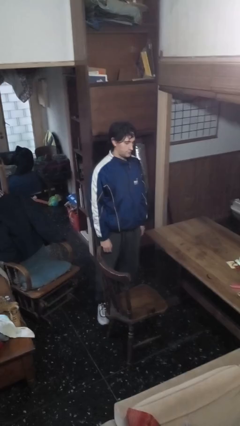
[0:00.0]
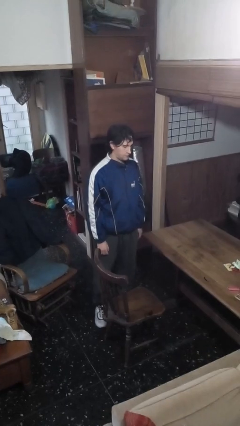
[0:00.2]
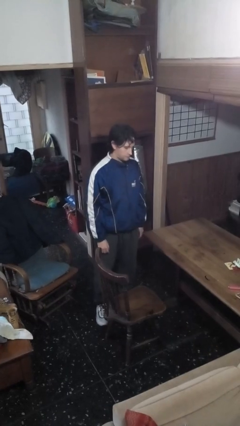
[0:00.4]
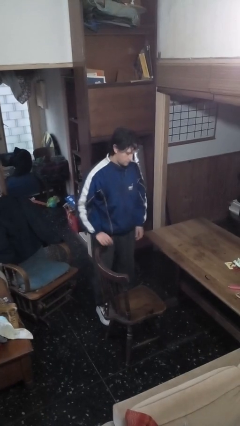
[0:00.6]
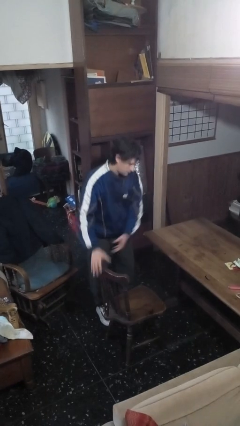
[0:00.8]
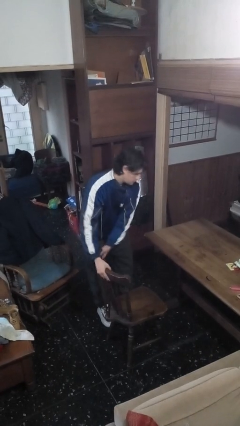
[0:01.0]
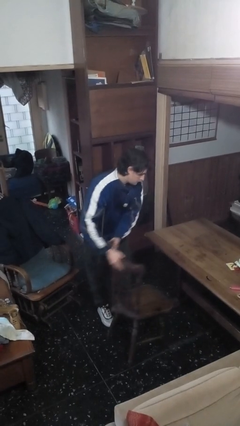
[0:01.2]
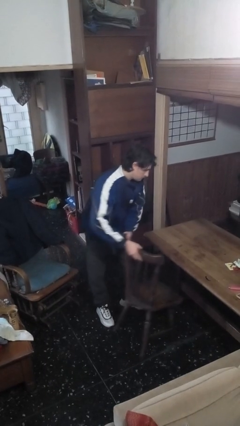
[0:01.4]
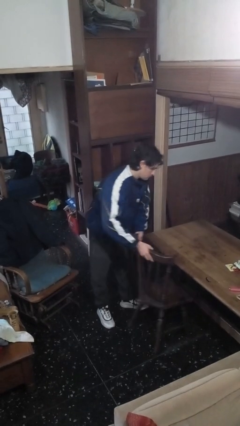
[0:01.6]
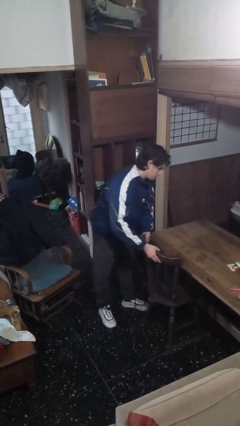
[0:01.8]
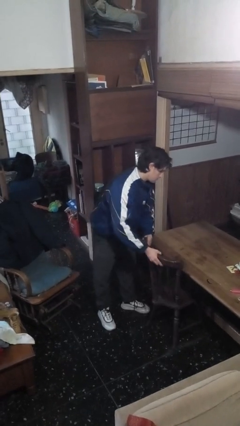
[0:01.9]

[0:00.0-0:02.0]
person pushes in chair

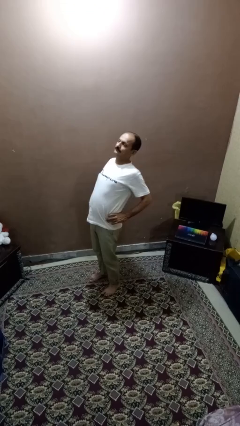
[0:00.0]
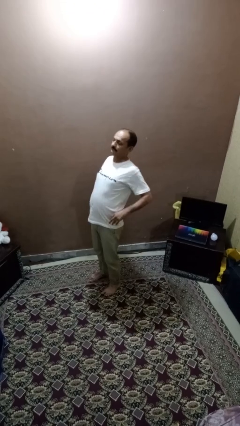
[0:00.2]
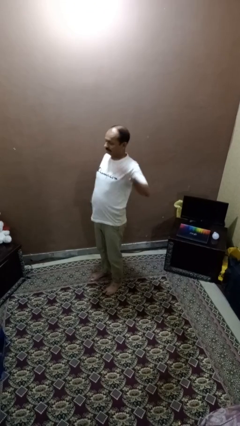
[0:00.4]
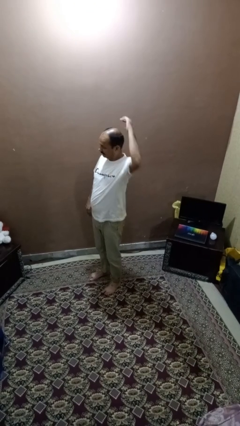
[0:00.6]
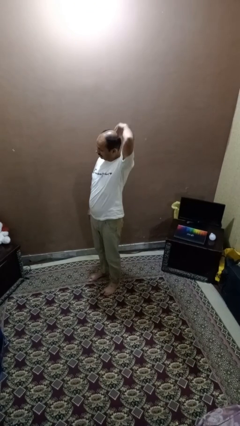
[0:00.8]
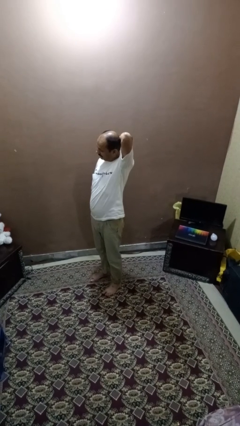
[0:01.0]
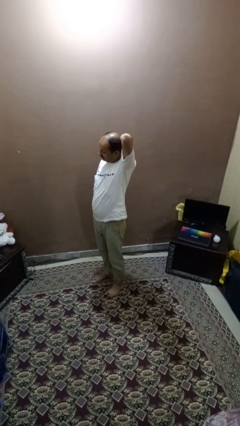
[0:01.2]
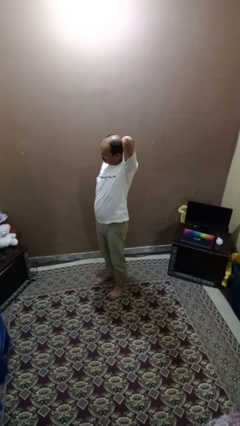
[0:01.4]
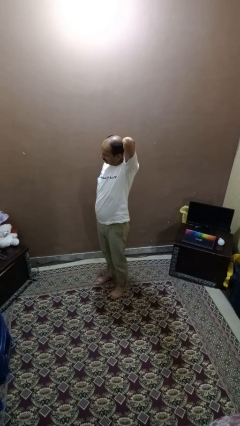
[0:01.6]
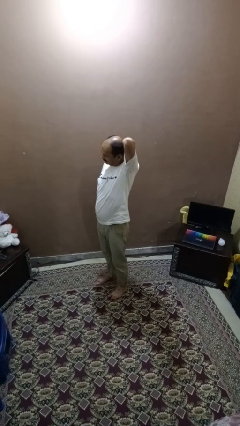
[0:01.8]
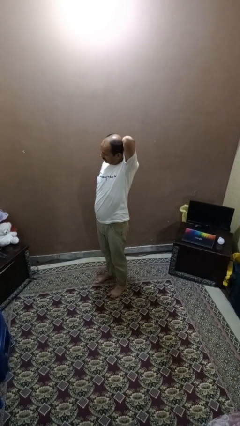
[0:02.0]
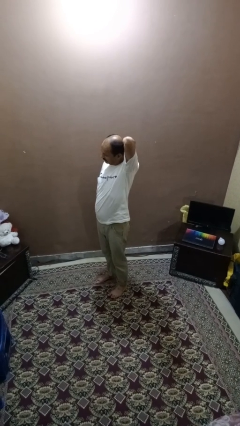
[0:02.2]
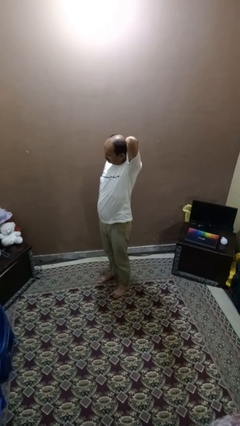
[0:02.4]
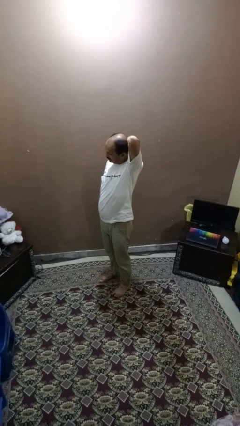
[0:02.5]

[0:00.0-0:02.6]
person stretches arms to side

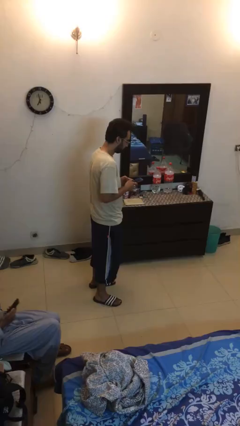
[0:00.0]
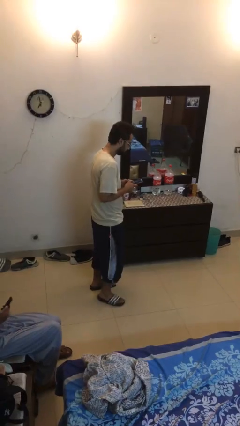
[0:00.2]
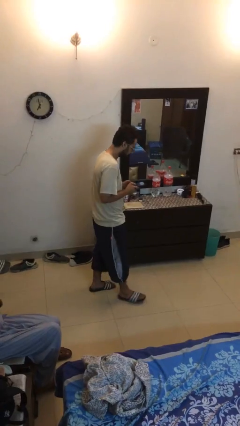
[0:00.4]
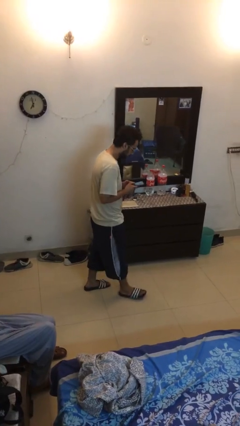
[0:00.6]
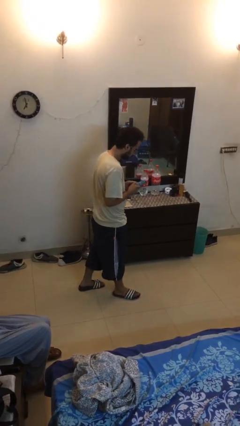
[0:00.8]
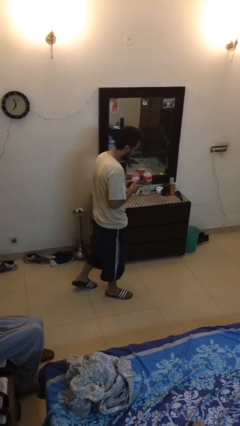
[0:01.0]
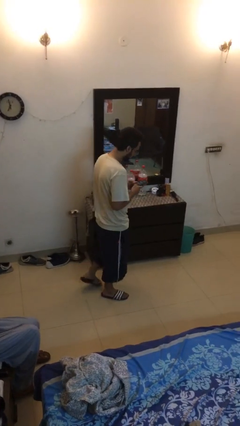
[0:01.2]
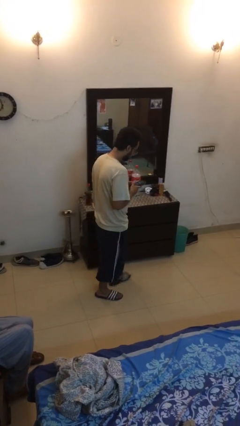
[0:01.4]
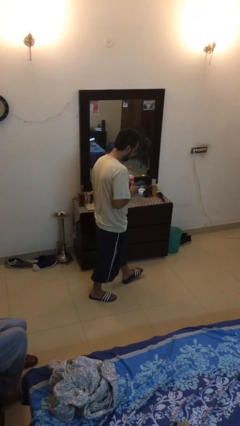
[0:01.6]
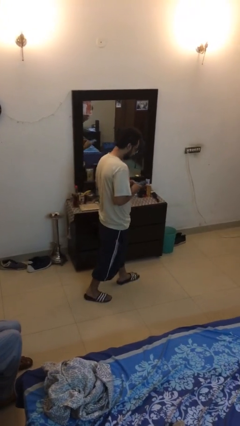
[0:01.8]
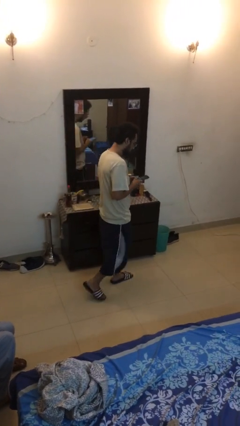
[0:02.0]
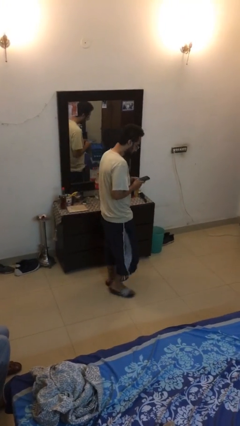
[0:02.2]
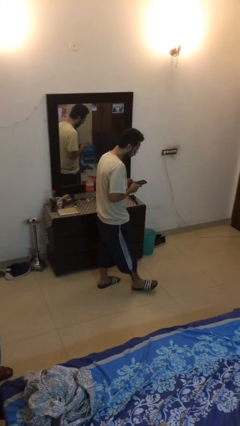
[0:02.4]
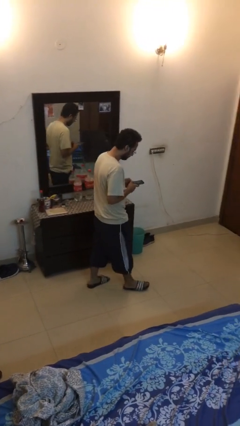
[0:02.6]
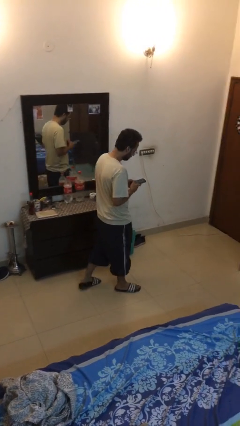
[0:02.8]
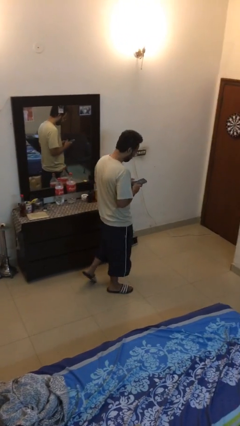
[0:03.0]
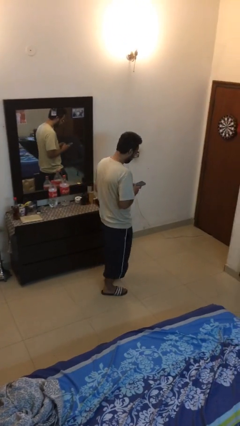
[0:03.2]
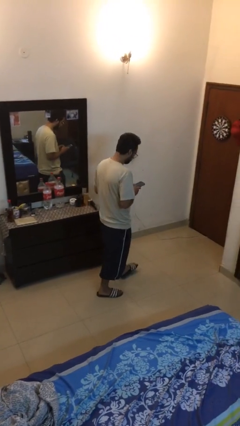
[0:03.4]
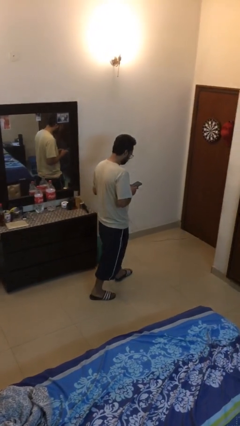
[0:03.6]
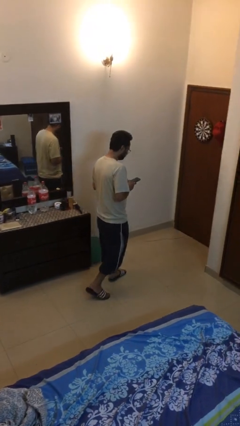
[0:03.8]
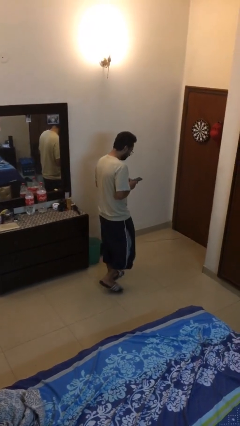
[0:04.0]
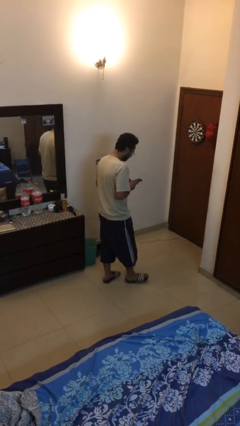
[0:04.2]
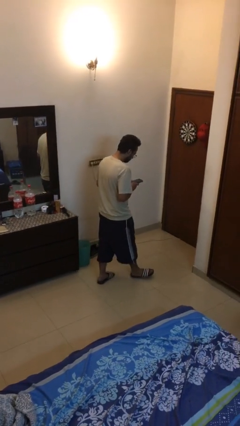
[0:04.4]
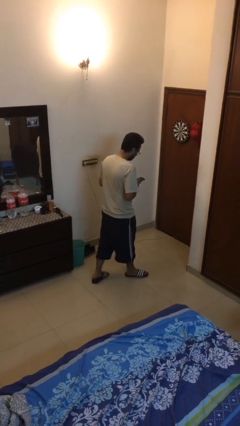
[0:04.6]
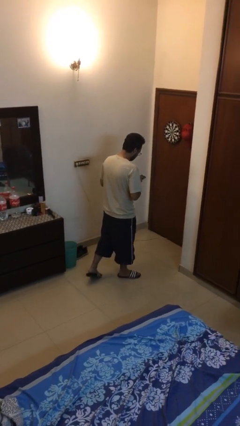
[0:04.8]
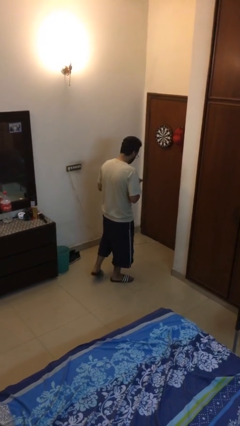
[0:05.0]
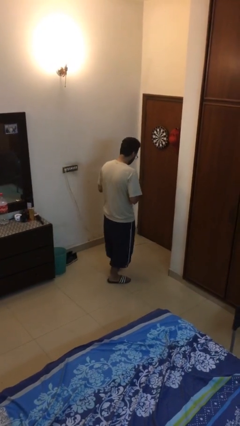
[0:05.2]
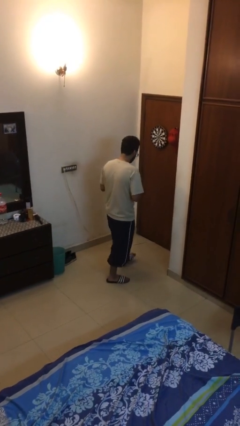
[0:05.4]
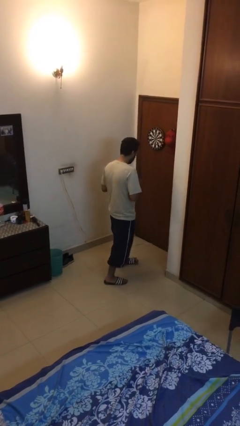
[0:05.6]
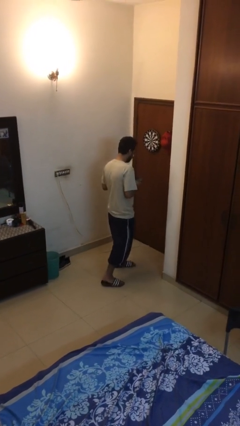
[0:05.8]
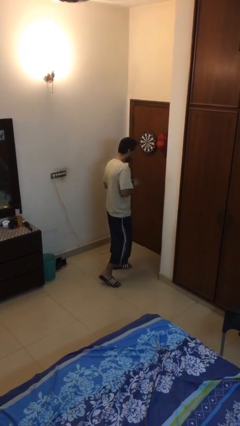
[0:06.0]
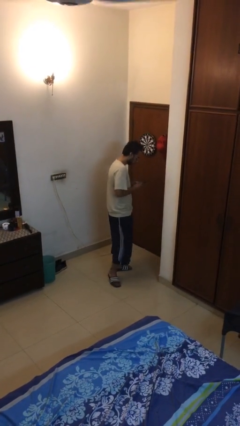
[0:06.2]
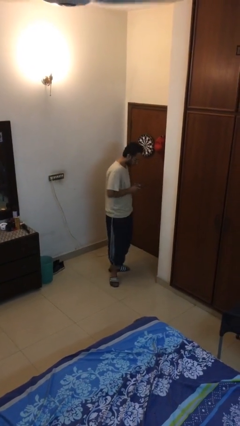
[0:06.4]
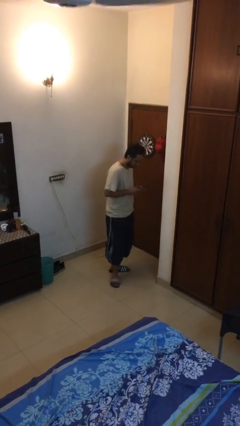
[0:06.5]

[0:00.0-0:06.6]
person texts on phone

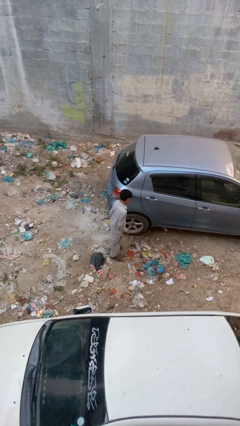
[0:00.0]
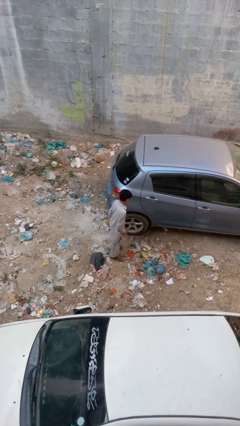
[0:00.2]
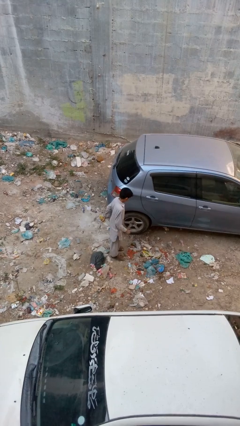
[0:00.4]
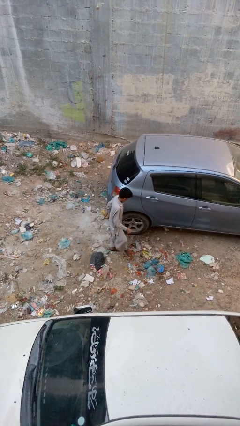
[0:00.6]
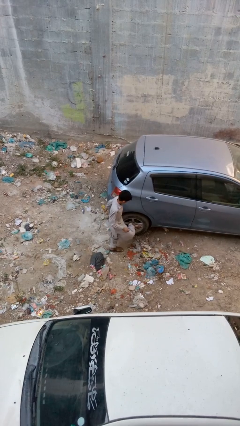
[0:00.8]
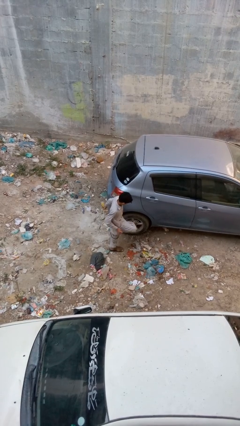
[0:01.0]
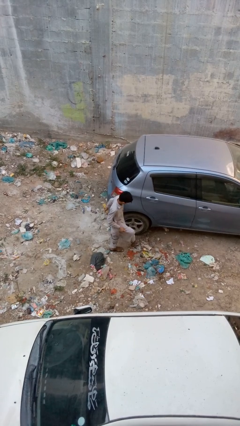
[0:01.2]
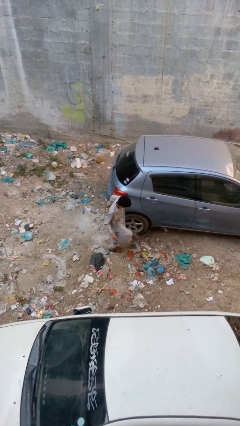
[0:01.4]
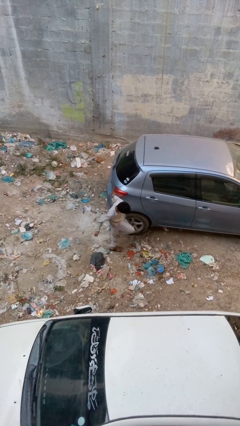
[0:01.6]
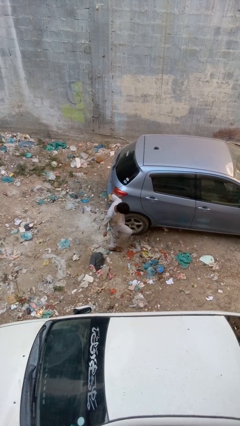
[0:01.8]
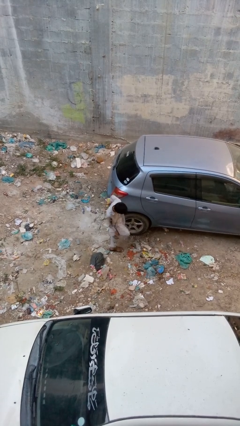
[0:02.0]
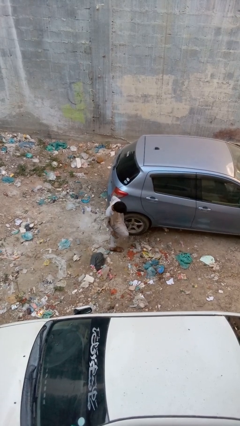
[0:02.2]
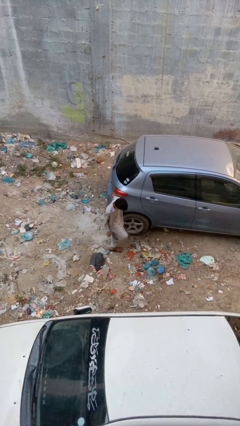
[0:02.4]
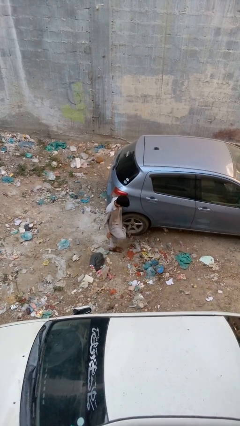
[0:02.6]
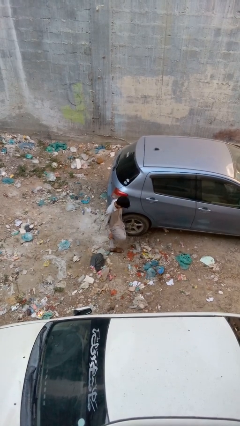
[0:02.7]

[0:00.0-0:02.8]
person kicks car tires

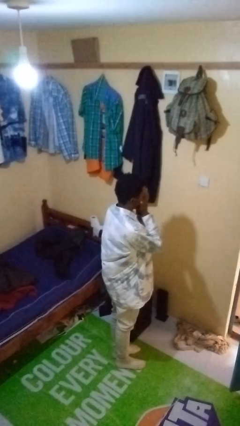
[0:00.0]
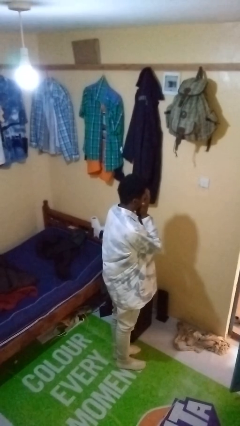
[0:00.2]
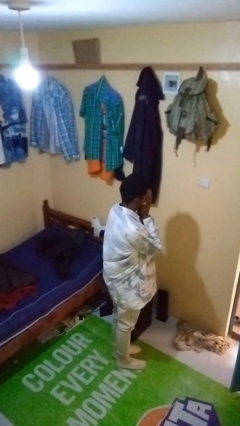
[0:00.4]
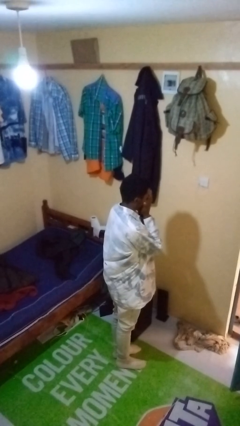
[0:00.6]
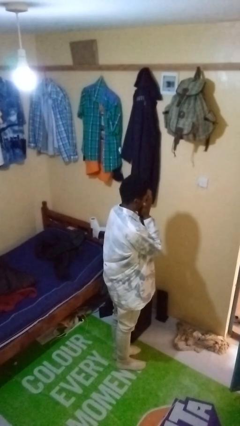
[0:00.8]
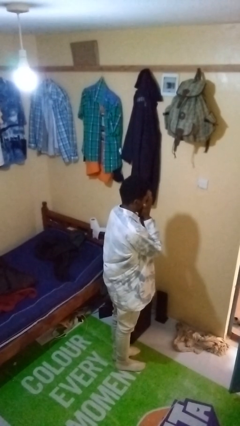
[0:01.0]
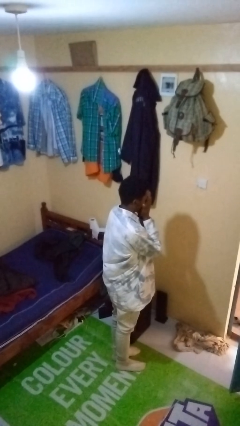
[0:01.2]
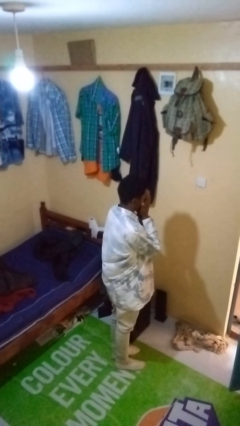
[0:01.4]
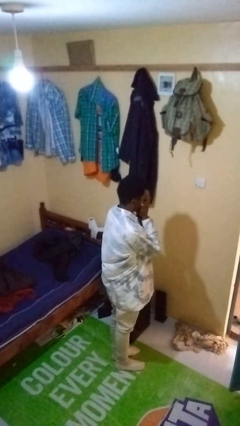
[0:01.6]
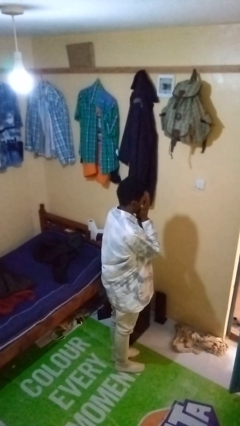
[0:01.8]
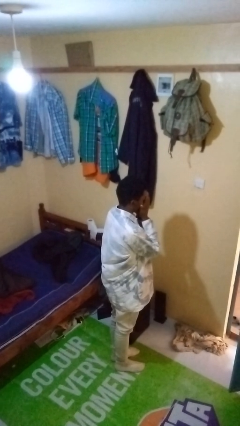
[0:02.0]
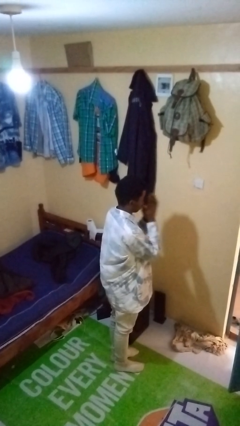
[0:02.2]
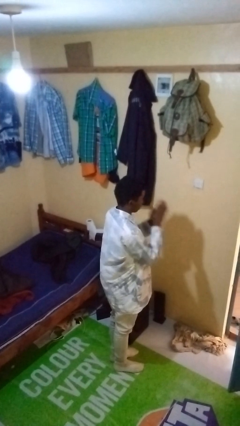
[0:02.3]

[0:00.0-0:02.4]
person covers face with hands

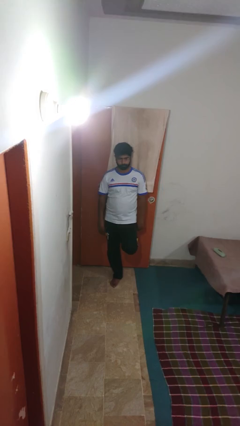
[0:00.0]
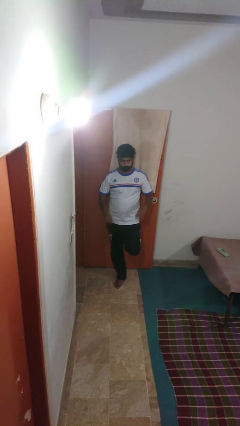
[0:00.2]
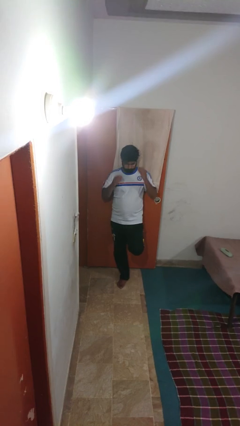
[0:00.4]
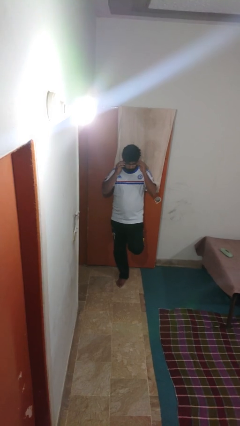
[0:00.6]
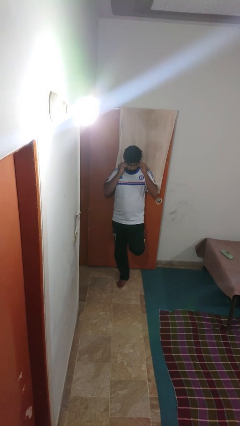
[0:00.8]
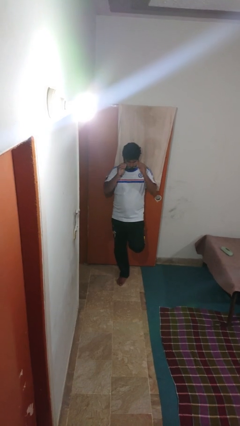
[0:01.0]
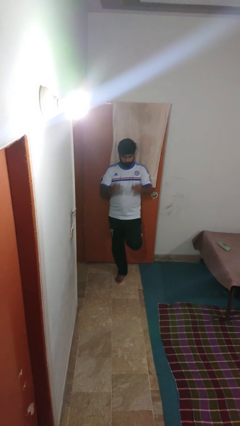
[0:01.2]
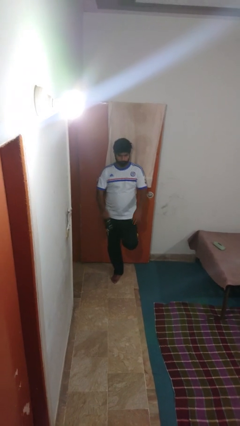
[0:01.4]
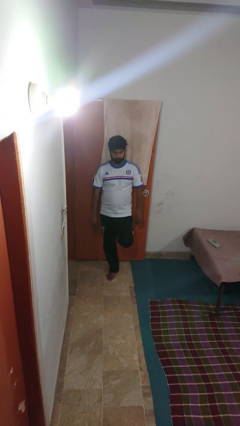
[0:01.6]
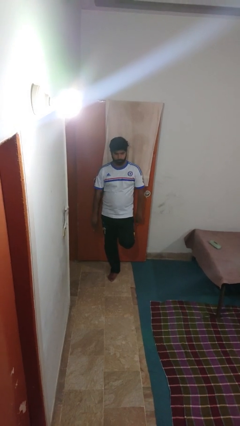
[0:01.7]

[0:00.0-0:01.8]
person takes off glasses
